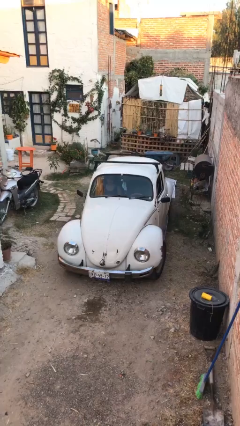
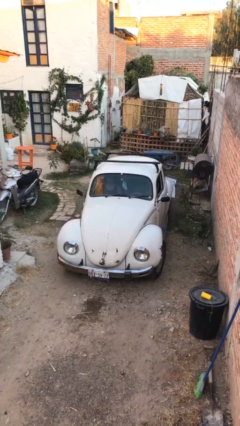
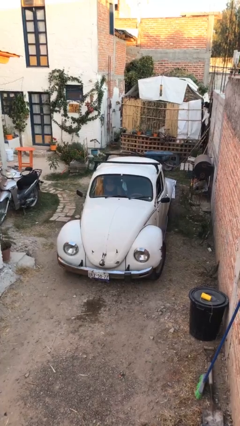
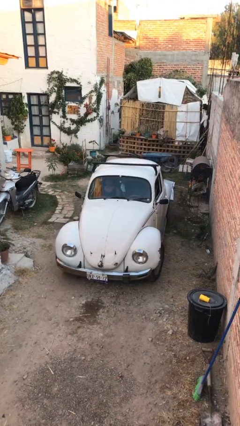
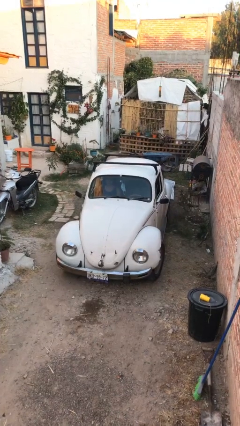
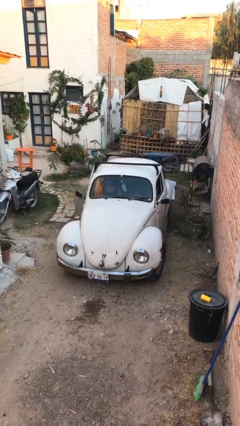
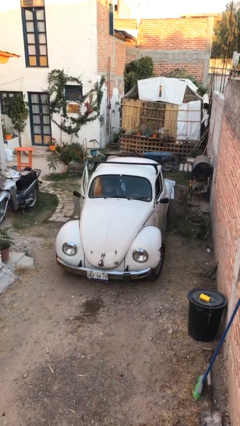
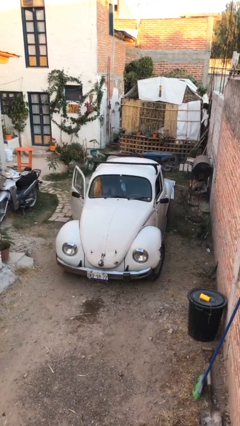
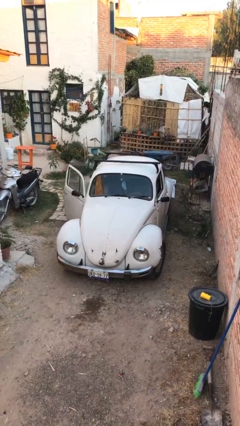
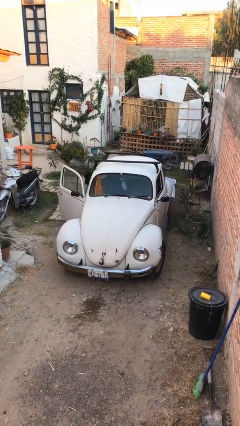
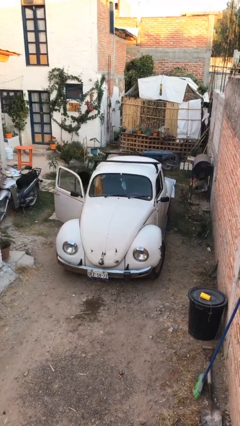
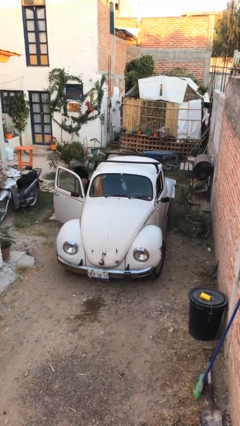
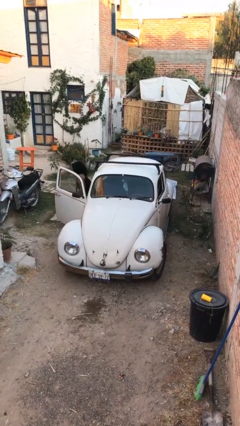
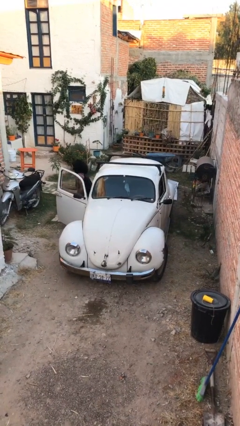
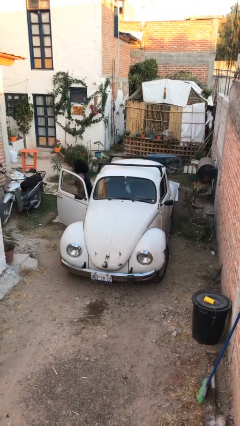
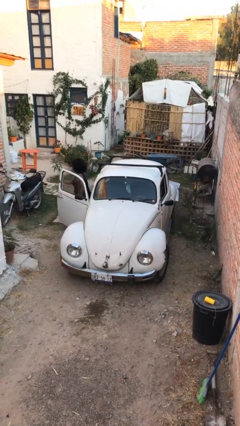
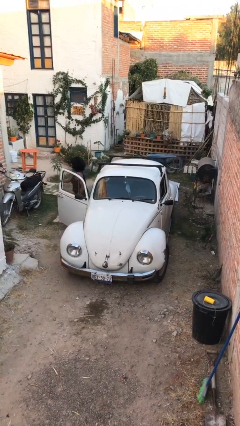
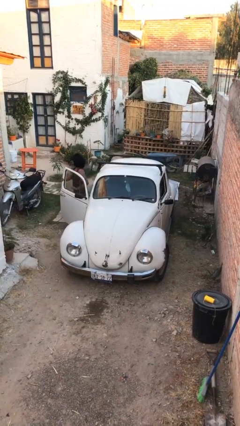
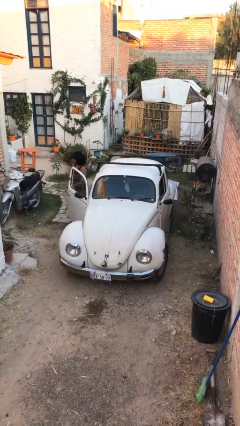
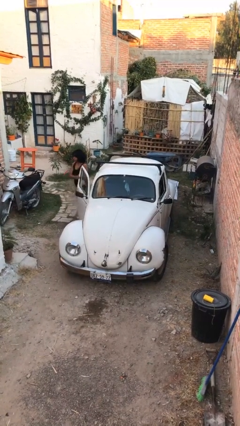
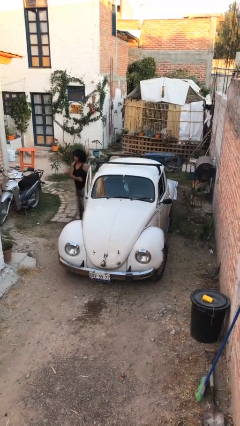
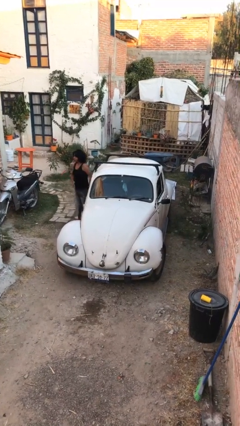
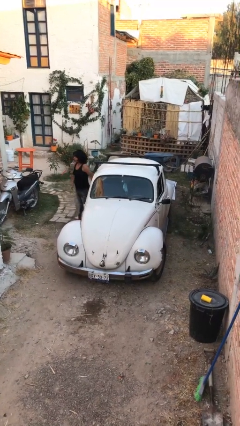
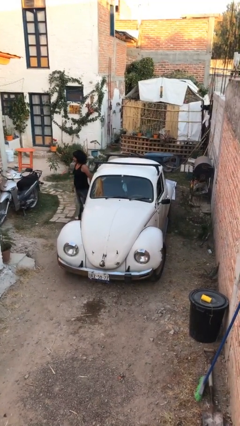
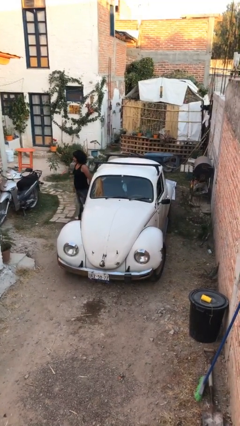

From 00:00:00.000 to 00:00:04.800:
car drops off person

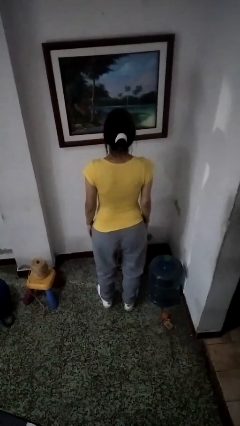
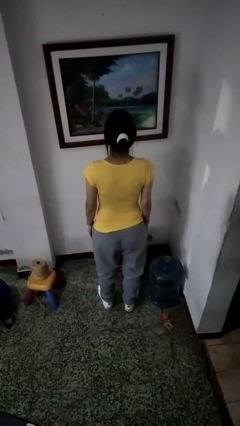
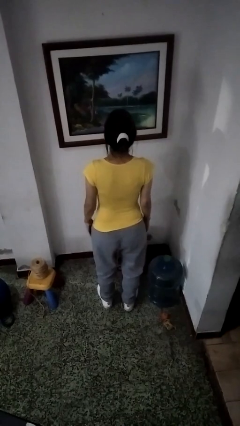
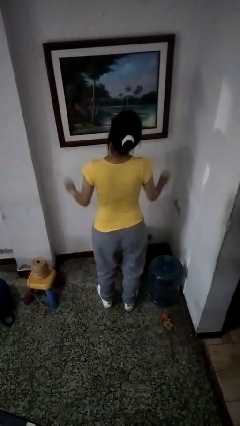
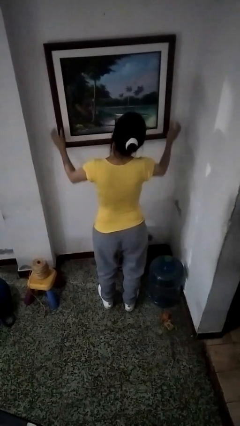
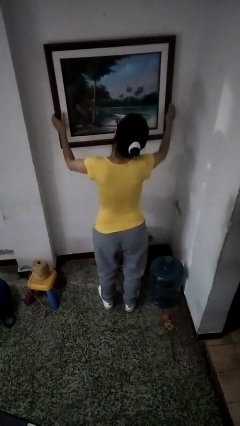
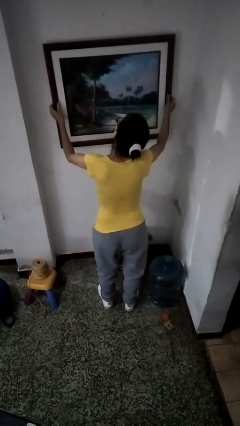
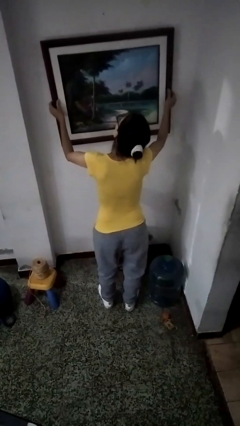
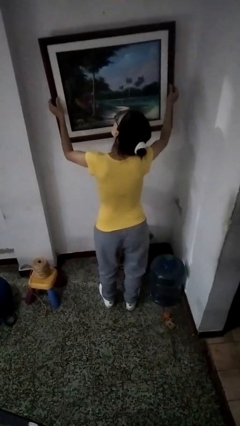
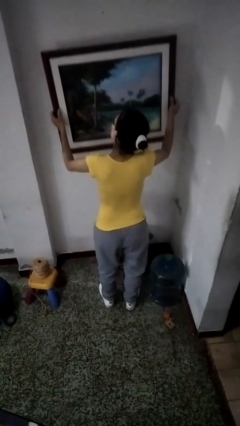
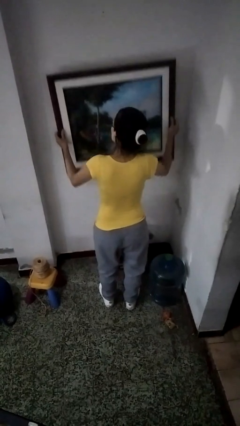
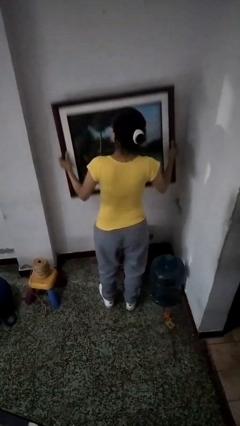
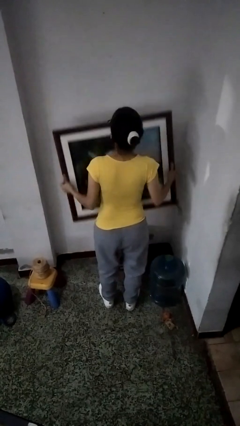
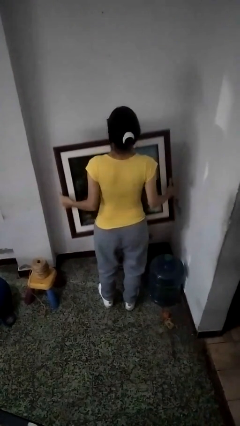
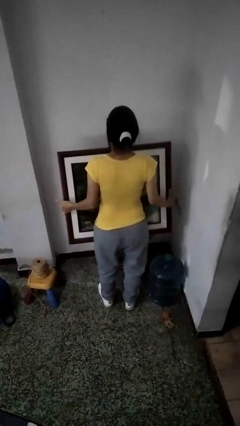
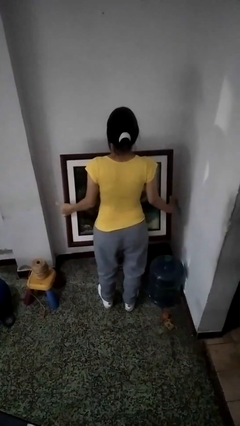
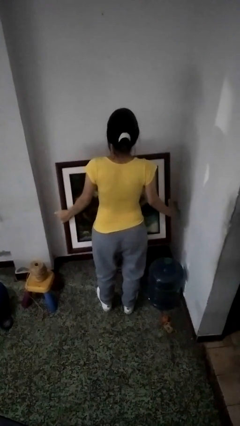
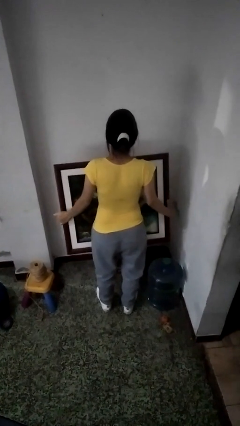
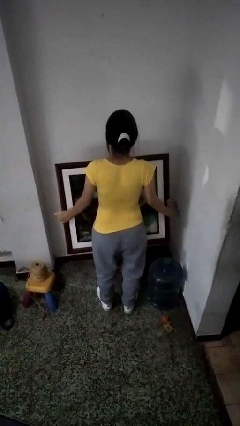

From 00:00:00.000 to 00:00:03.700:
person takes down picture frame

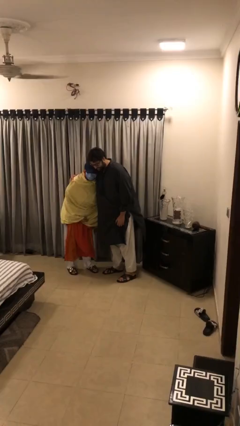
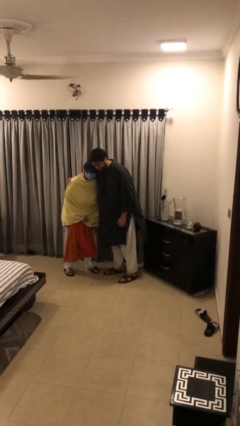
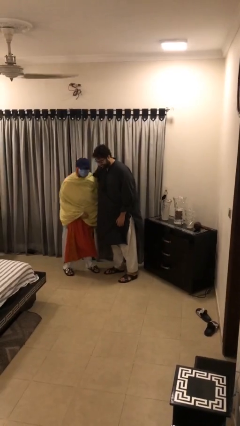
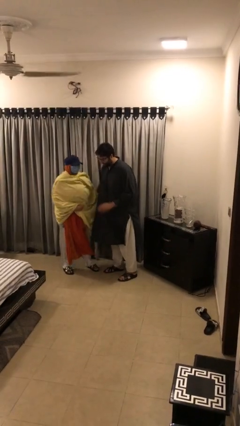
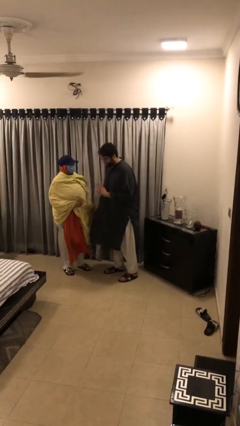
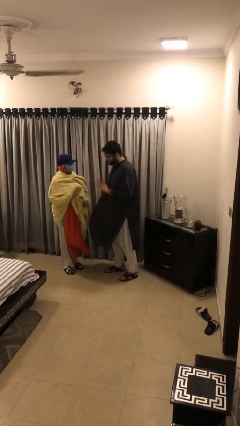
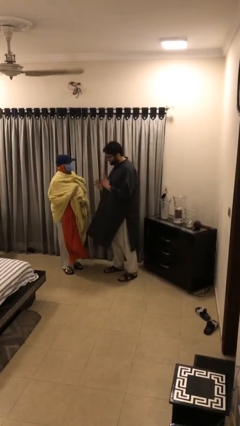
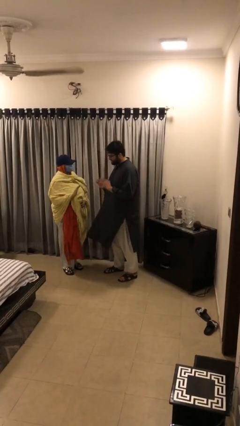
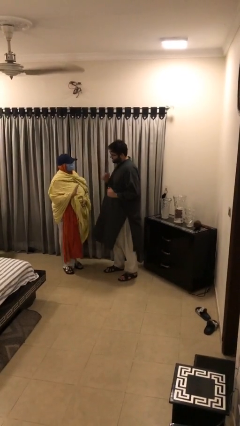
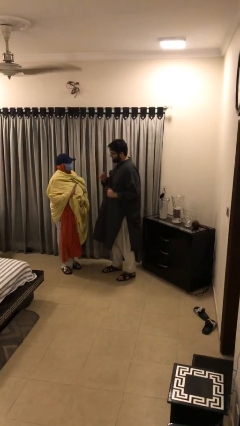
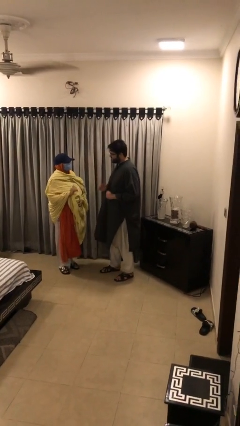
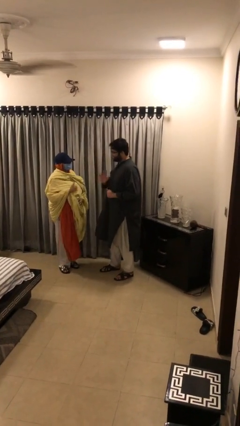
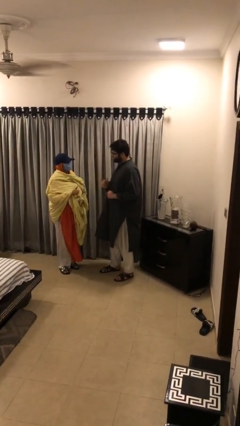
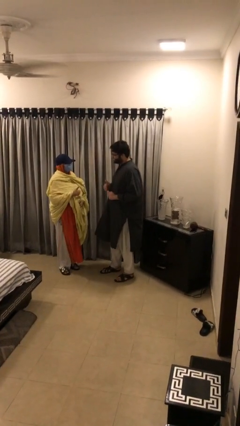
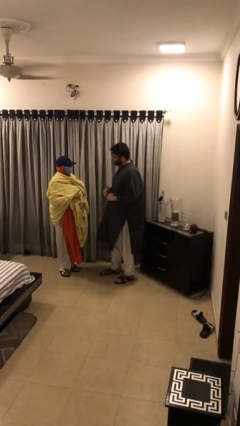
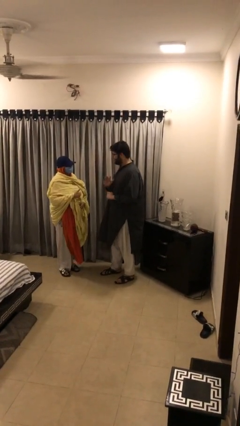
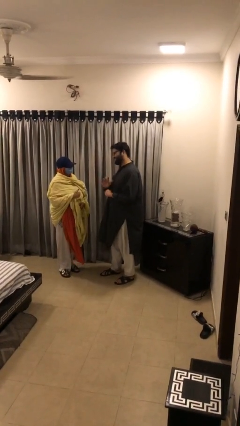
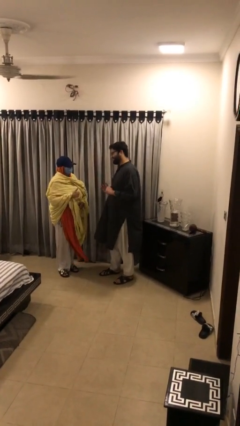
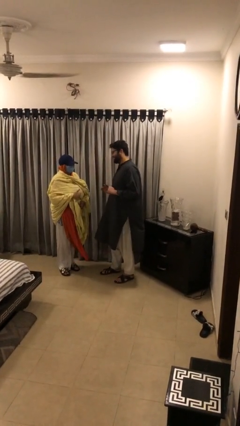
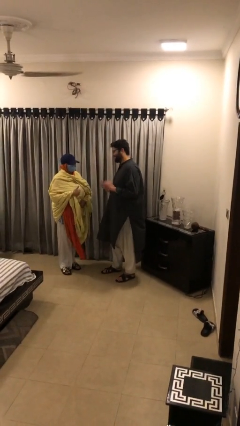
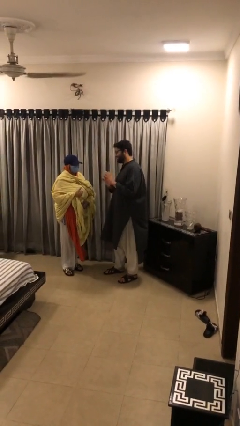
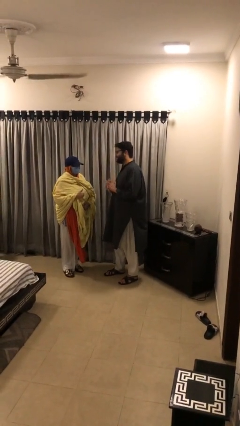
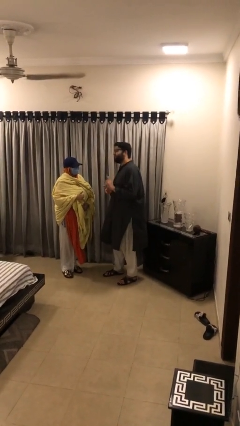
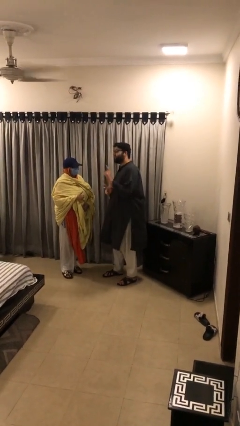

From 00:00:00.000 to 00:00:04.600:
person talks to person

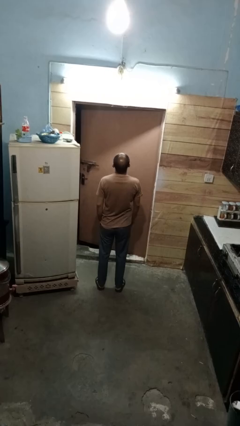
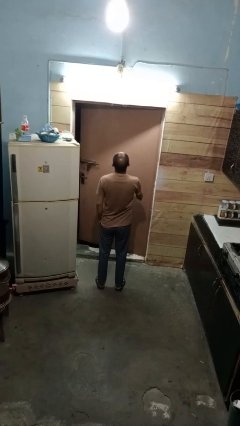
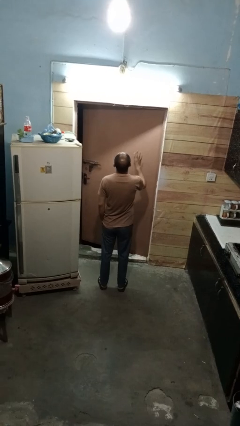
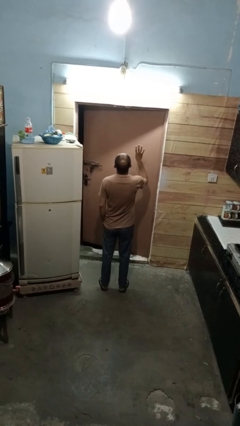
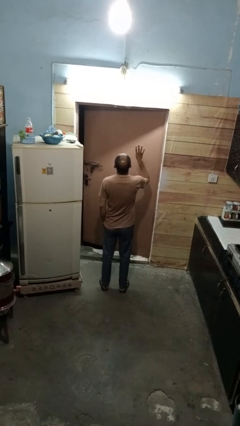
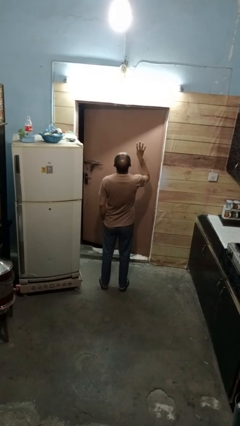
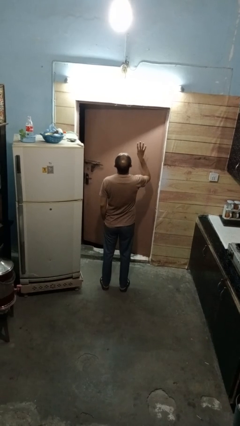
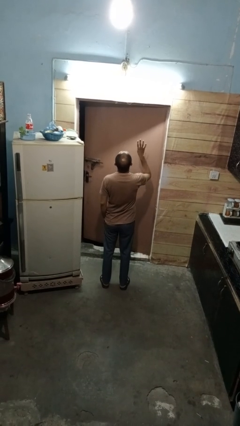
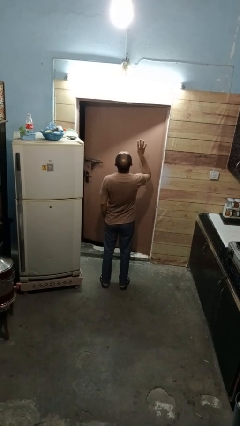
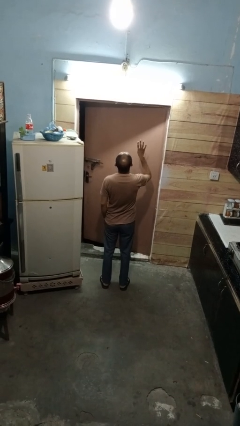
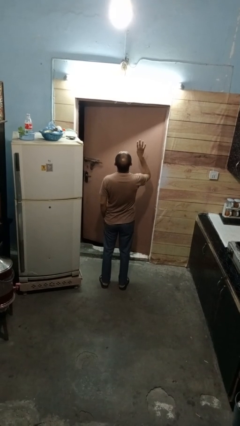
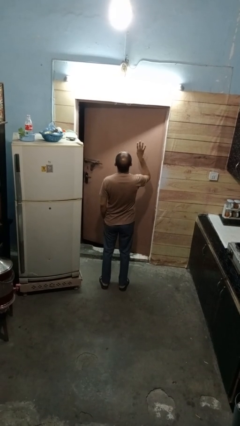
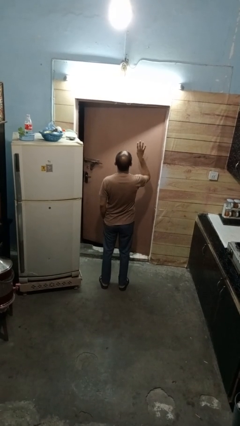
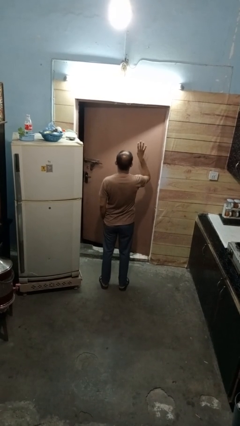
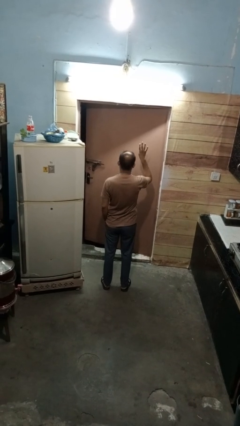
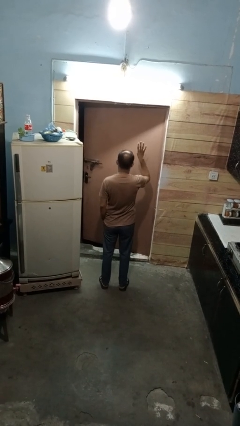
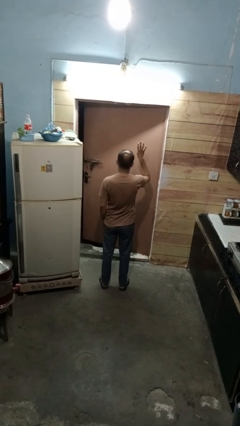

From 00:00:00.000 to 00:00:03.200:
person gestures number four

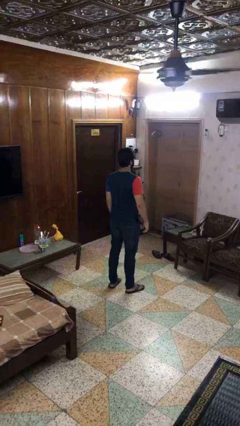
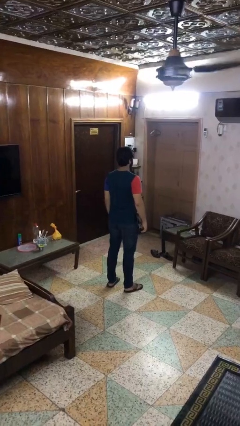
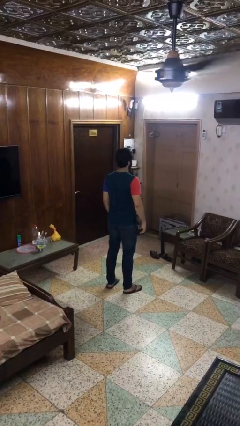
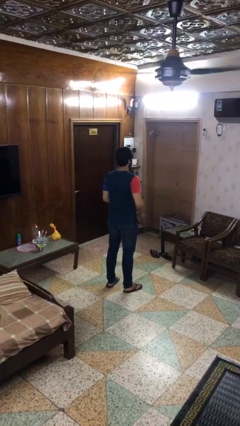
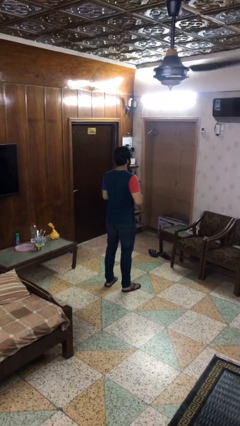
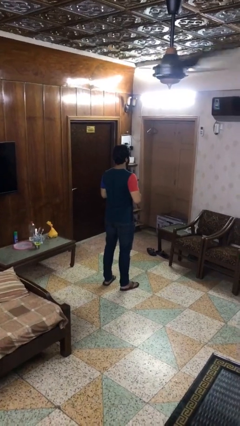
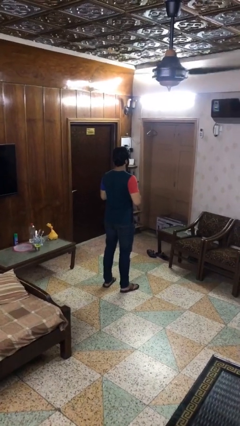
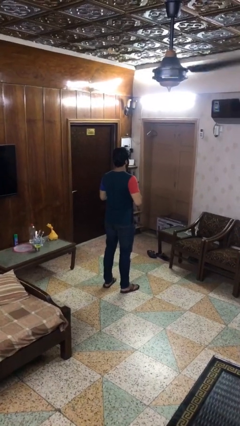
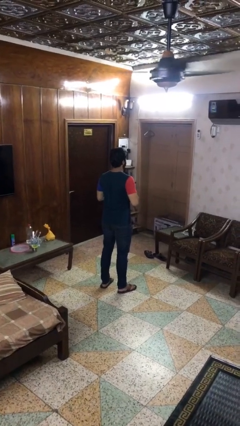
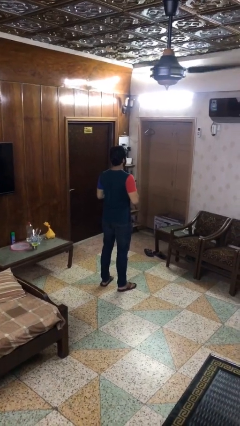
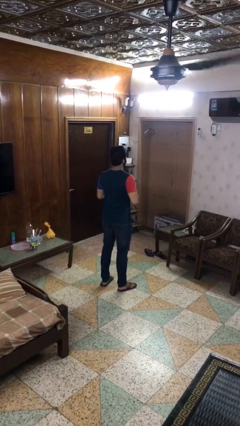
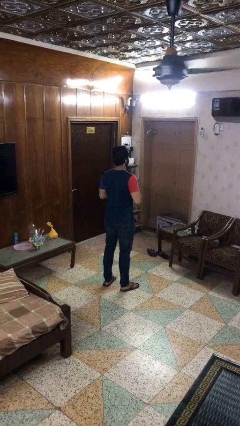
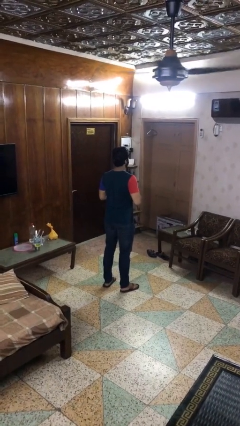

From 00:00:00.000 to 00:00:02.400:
person buttons shirt
